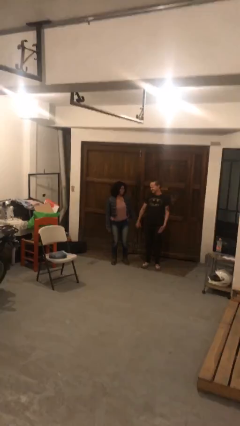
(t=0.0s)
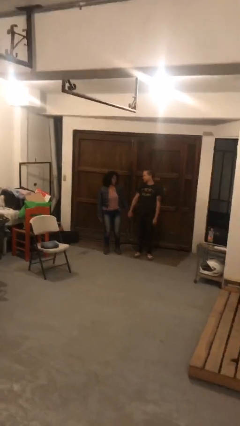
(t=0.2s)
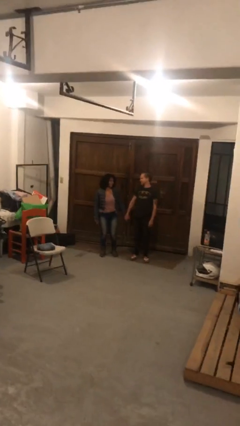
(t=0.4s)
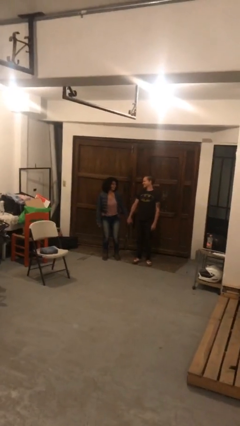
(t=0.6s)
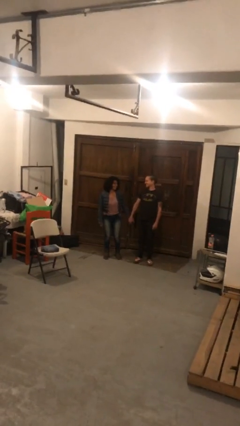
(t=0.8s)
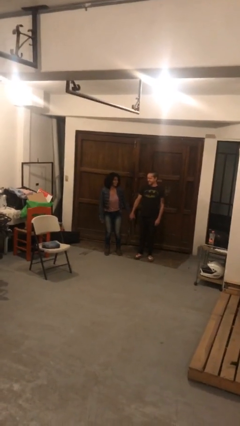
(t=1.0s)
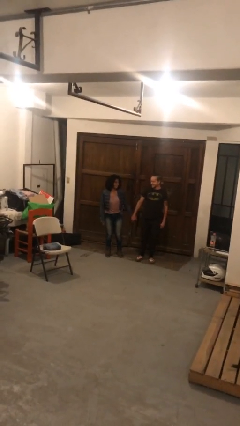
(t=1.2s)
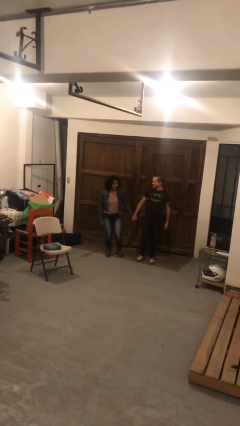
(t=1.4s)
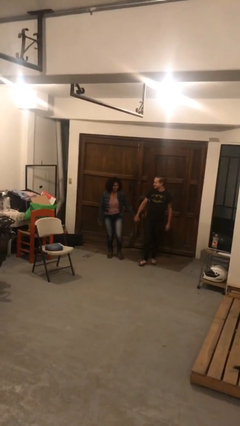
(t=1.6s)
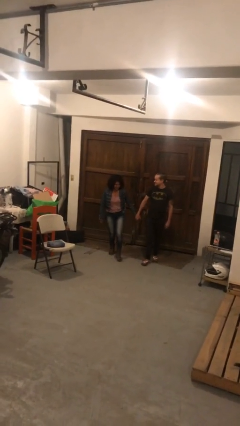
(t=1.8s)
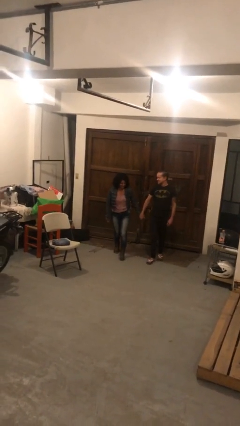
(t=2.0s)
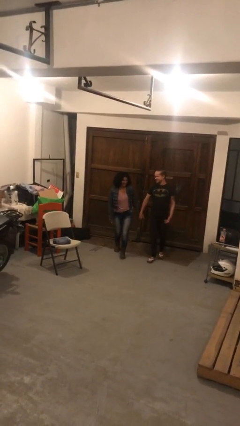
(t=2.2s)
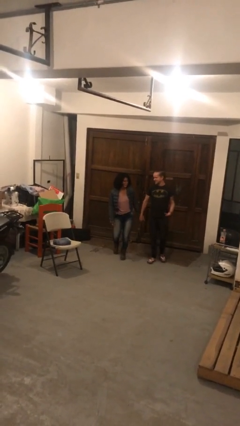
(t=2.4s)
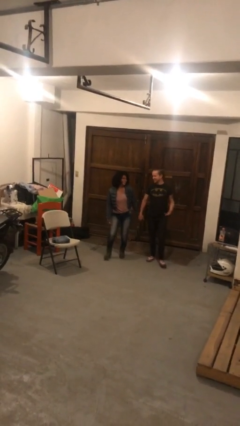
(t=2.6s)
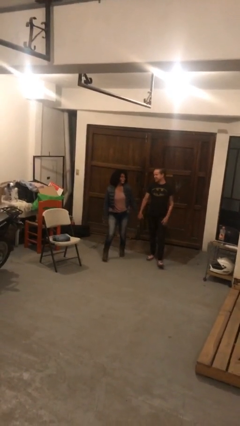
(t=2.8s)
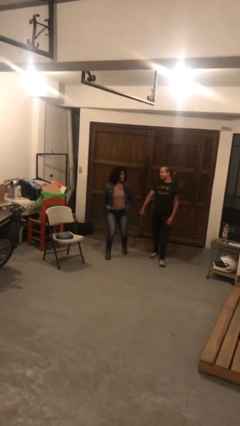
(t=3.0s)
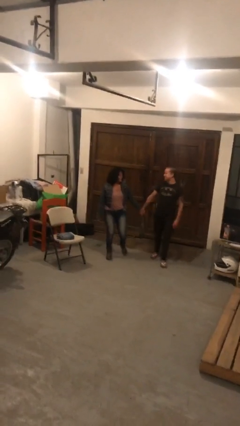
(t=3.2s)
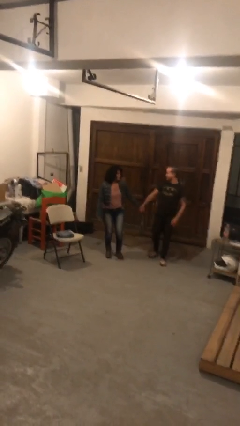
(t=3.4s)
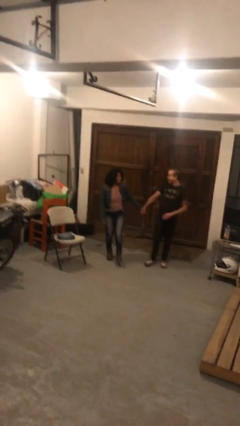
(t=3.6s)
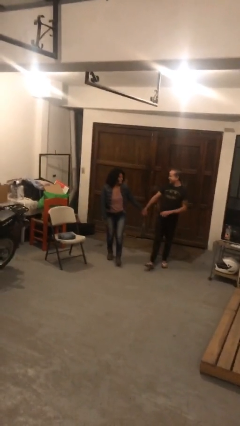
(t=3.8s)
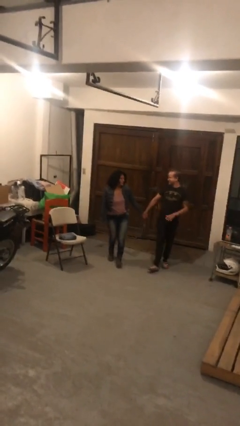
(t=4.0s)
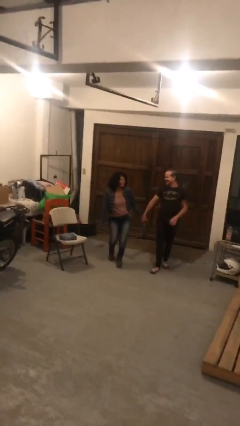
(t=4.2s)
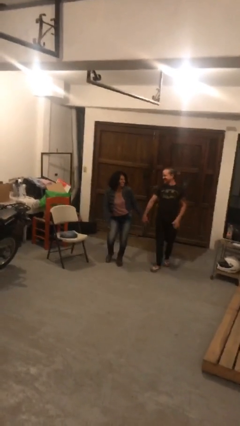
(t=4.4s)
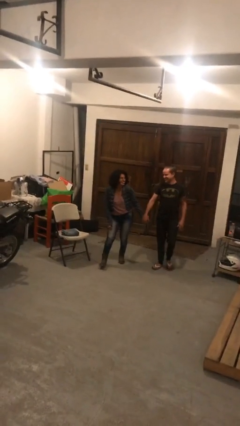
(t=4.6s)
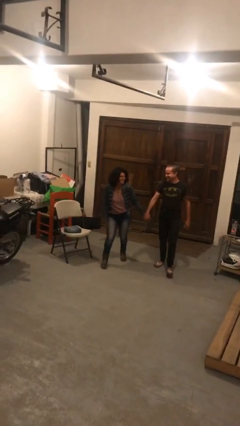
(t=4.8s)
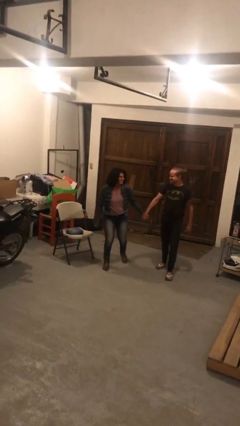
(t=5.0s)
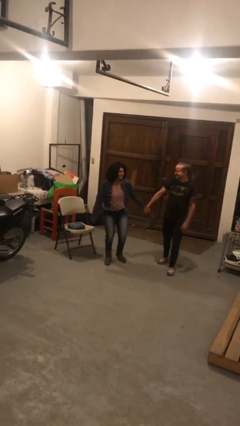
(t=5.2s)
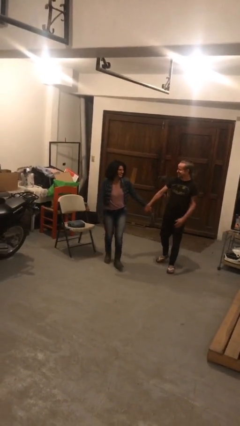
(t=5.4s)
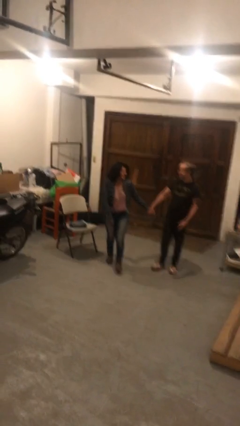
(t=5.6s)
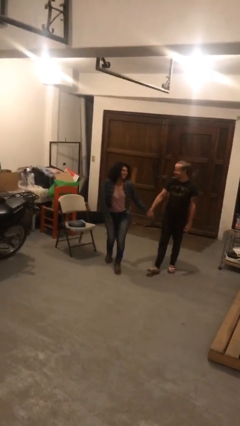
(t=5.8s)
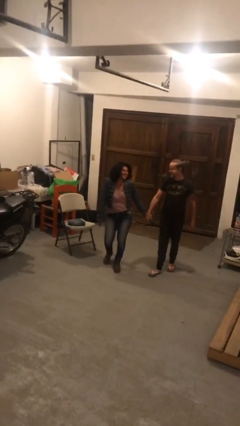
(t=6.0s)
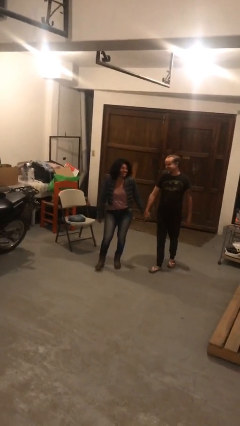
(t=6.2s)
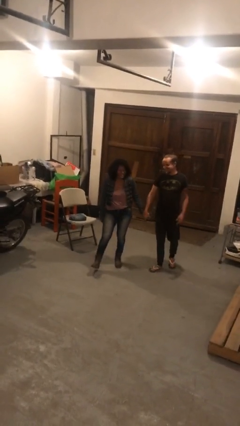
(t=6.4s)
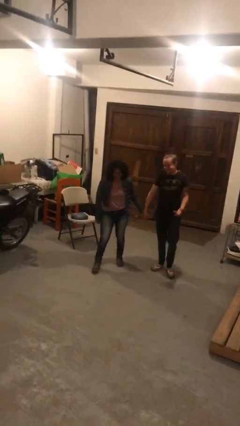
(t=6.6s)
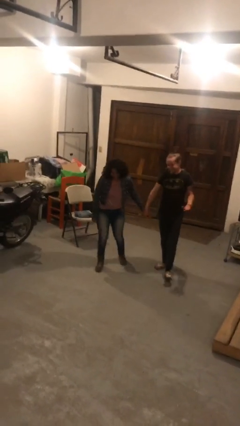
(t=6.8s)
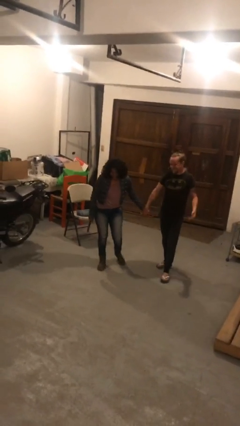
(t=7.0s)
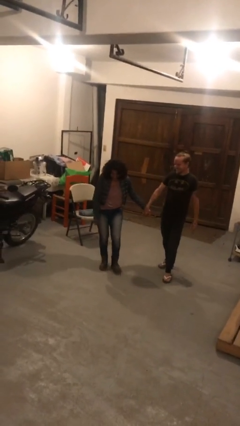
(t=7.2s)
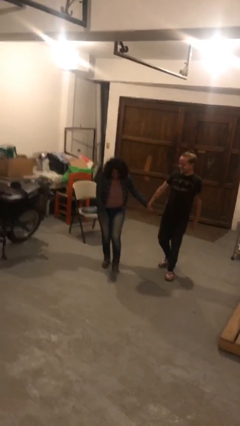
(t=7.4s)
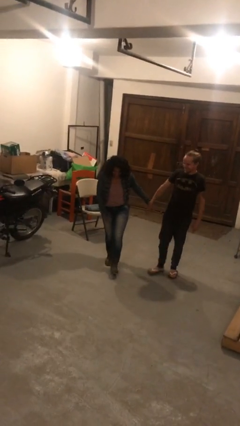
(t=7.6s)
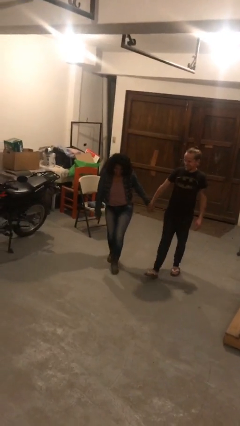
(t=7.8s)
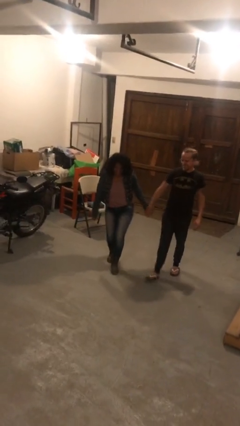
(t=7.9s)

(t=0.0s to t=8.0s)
person holds hand

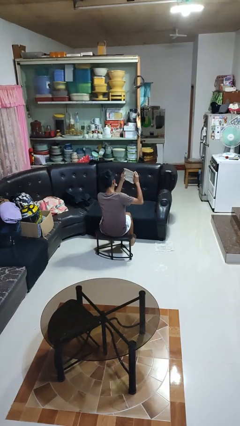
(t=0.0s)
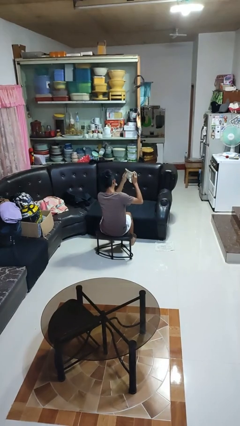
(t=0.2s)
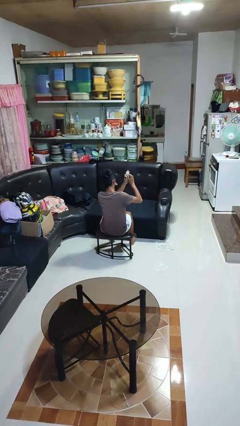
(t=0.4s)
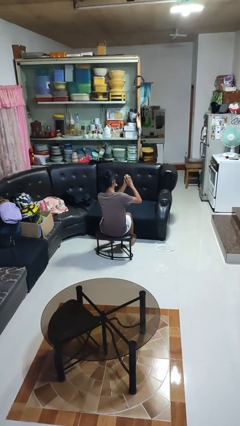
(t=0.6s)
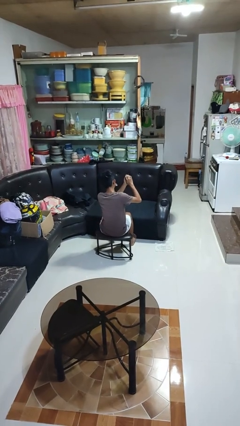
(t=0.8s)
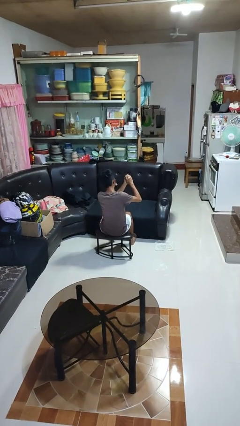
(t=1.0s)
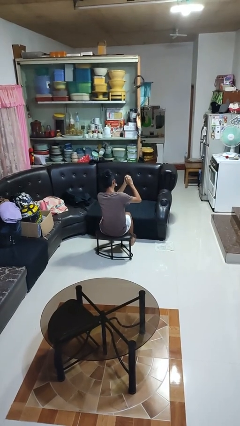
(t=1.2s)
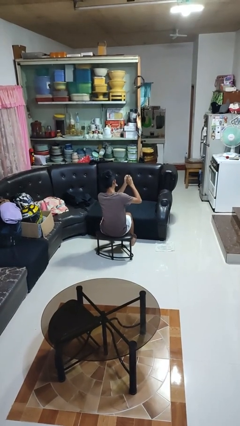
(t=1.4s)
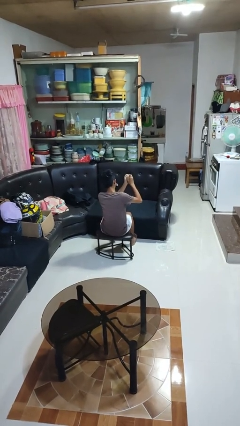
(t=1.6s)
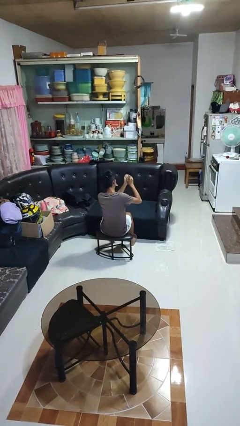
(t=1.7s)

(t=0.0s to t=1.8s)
person crumples paper

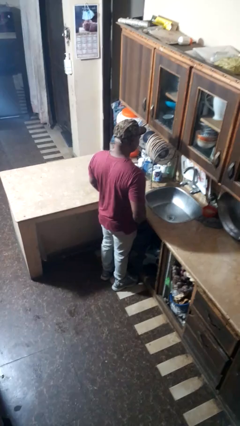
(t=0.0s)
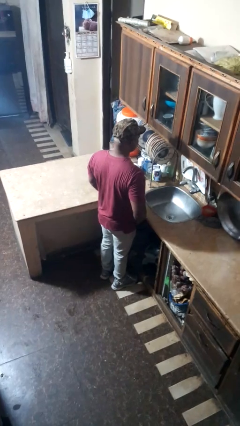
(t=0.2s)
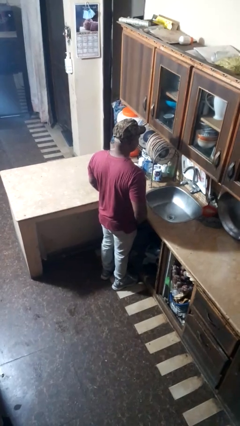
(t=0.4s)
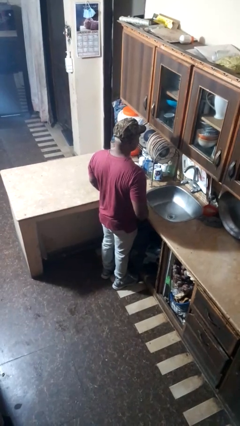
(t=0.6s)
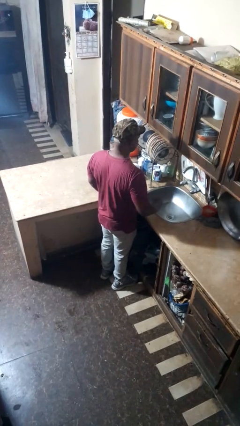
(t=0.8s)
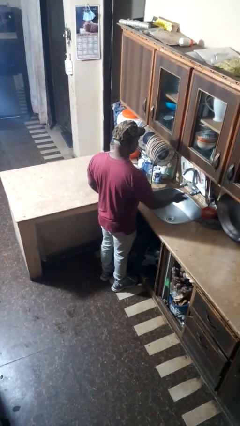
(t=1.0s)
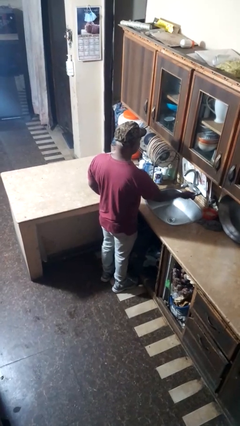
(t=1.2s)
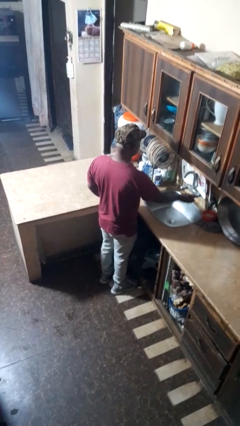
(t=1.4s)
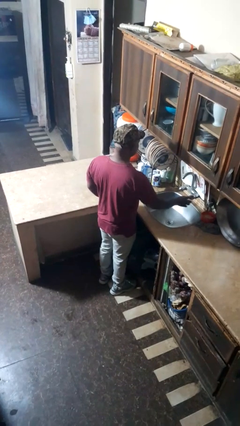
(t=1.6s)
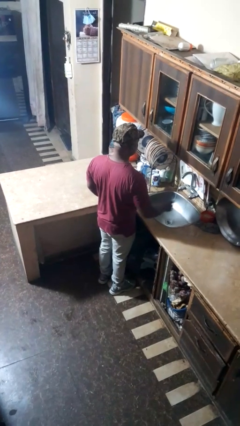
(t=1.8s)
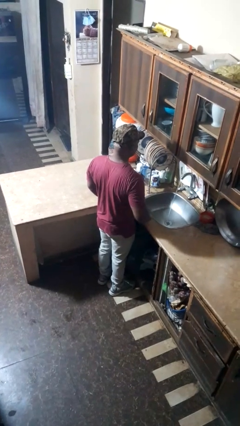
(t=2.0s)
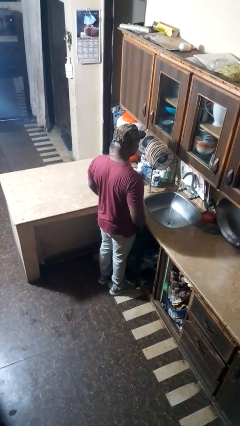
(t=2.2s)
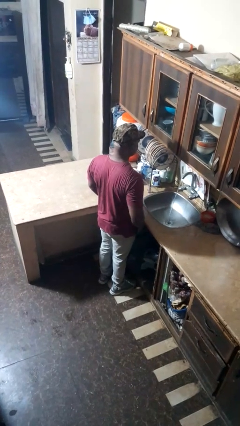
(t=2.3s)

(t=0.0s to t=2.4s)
person turns on faucet

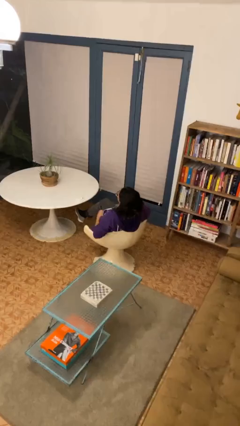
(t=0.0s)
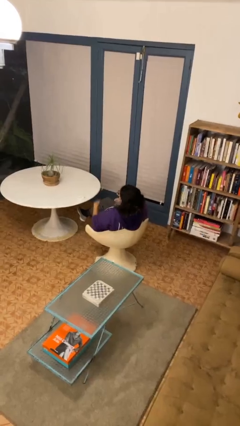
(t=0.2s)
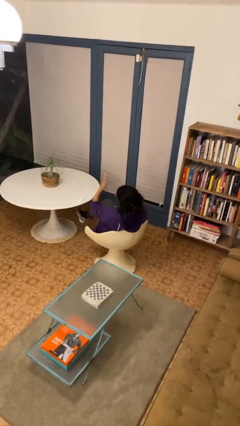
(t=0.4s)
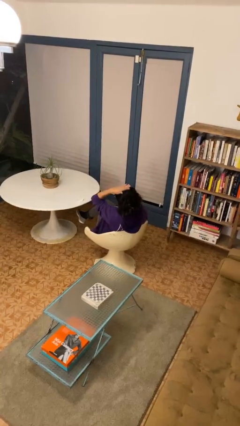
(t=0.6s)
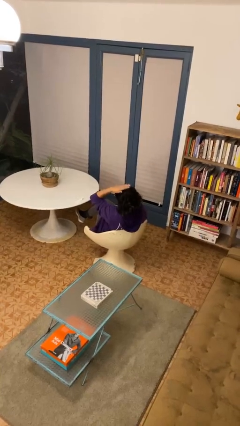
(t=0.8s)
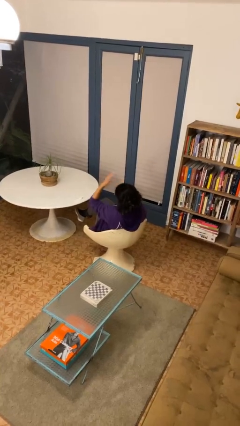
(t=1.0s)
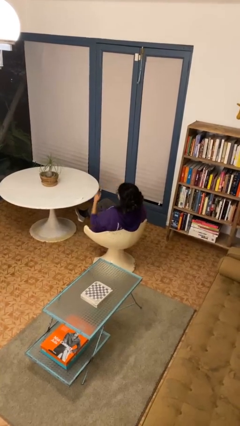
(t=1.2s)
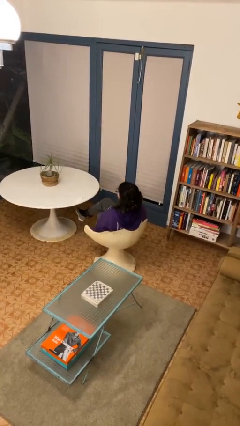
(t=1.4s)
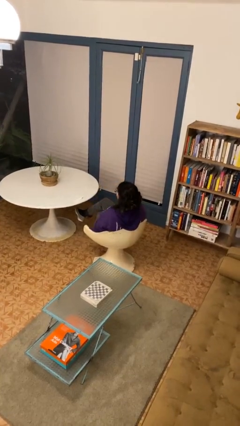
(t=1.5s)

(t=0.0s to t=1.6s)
person pats head

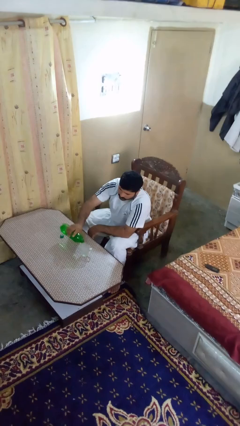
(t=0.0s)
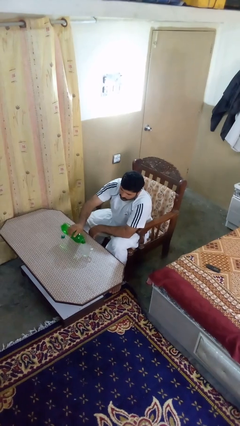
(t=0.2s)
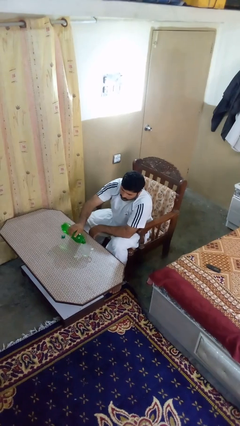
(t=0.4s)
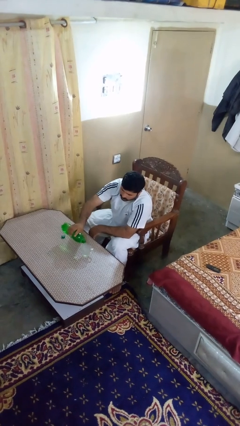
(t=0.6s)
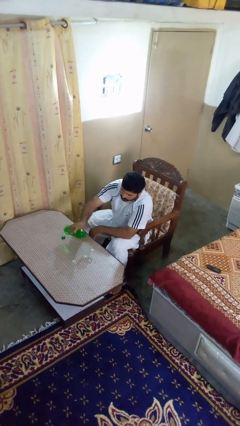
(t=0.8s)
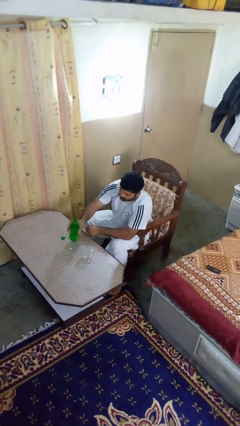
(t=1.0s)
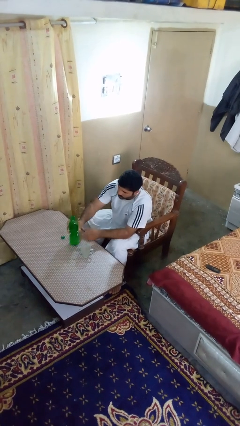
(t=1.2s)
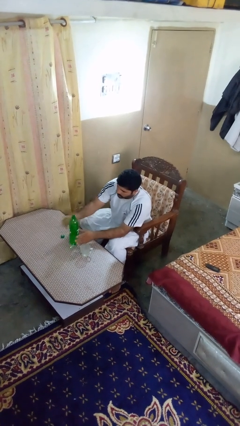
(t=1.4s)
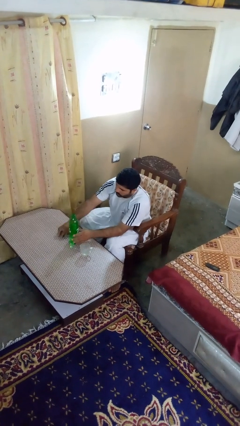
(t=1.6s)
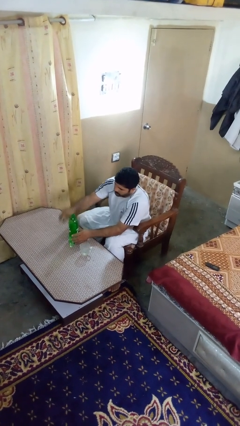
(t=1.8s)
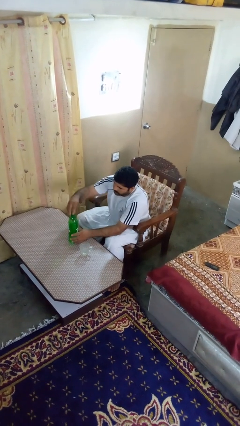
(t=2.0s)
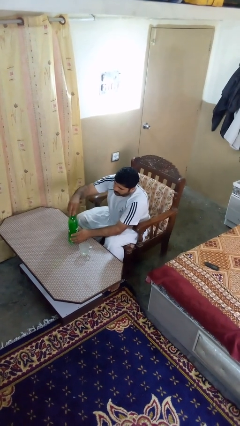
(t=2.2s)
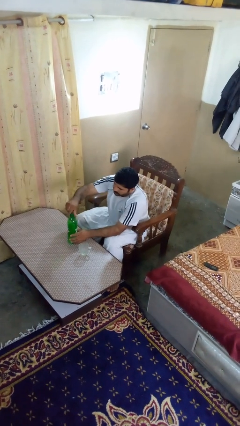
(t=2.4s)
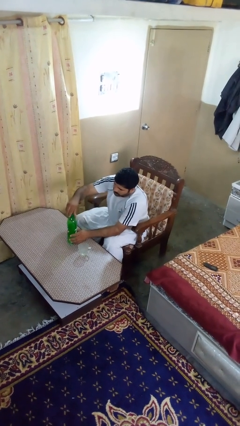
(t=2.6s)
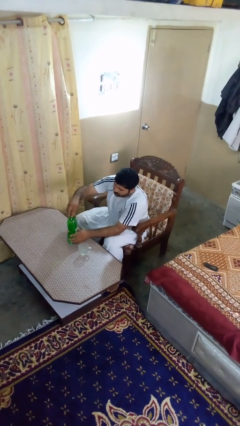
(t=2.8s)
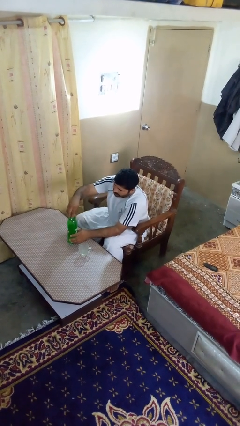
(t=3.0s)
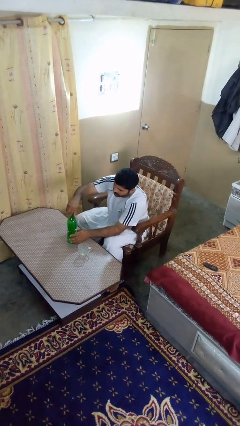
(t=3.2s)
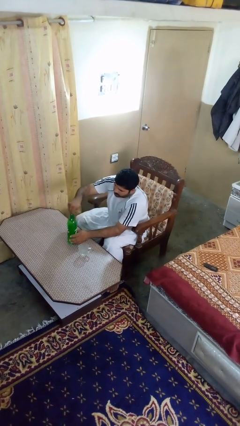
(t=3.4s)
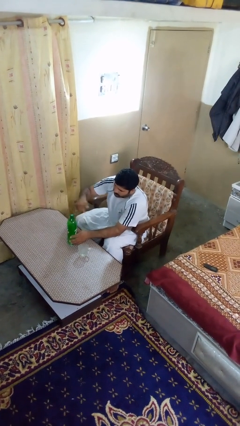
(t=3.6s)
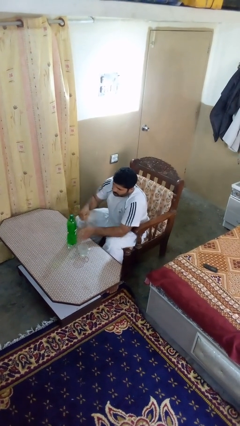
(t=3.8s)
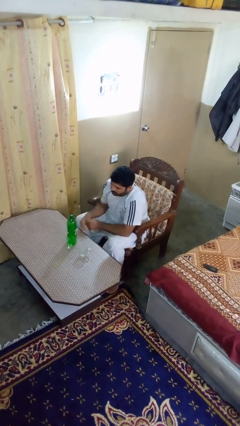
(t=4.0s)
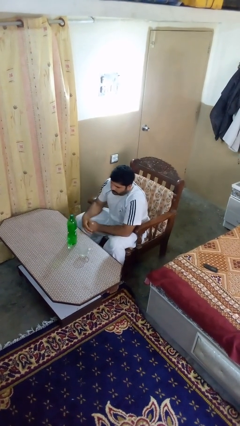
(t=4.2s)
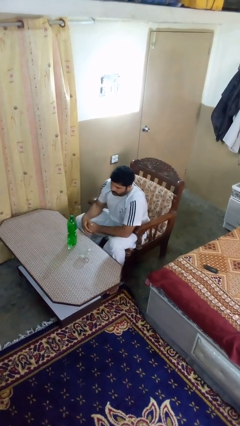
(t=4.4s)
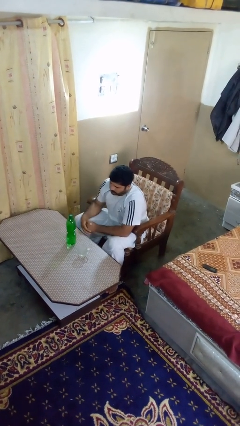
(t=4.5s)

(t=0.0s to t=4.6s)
person screws lid to bottle
